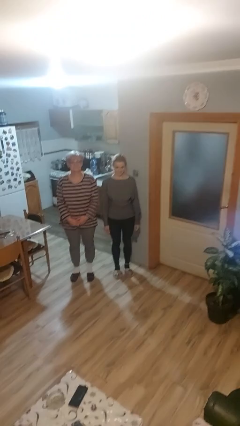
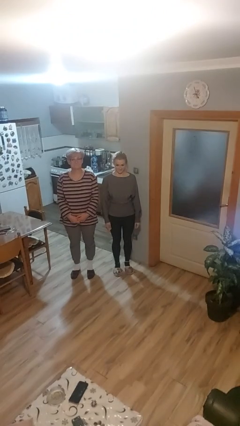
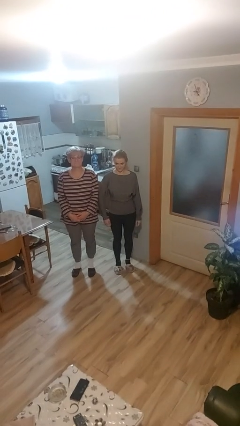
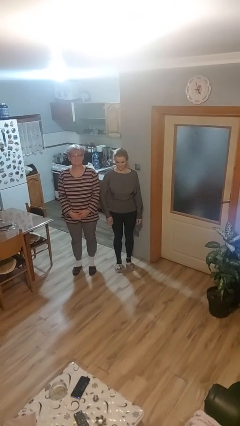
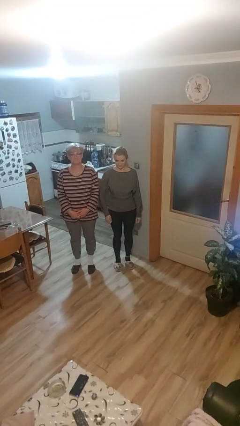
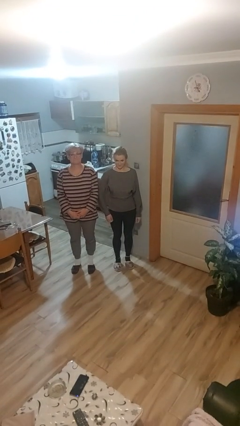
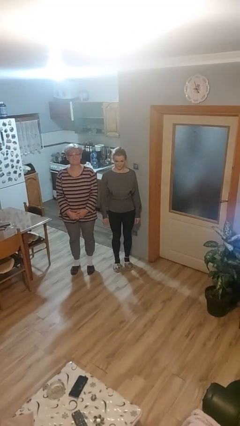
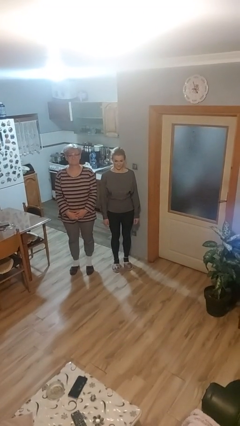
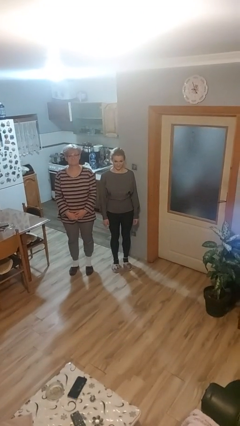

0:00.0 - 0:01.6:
person nudges person with elbow

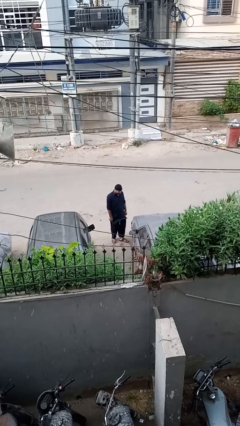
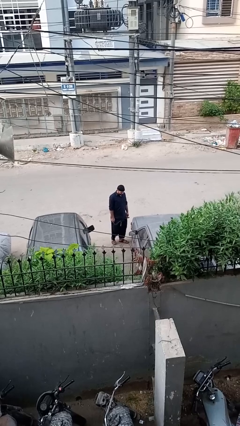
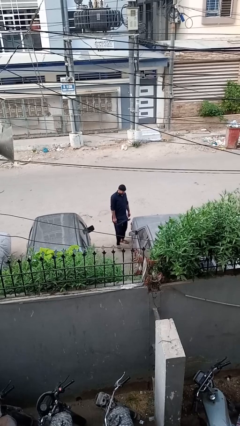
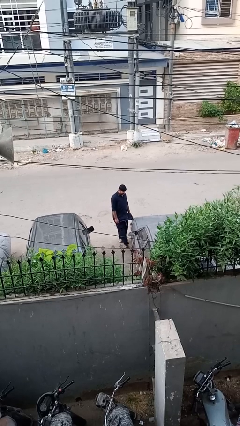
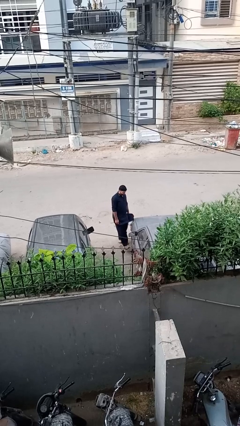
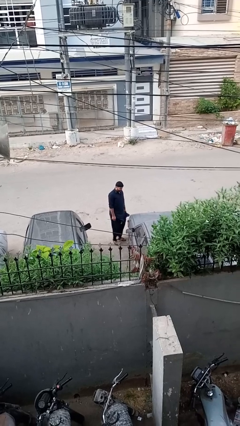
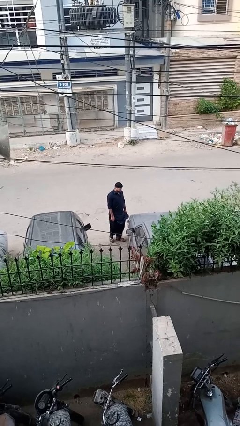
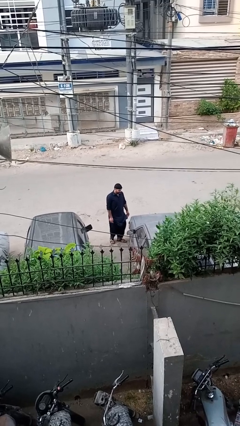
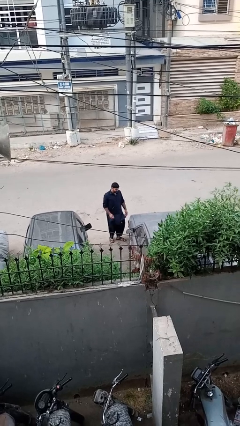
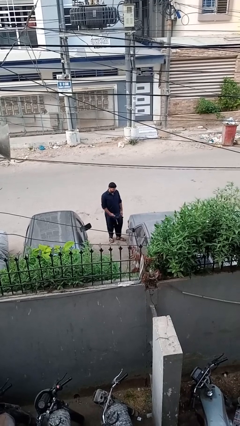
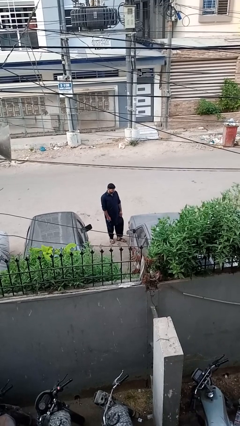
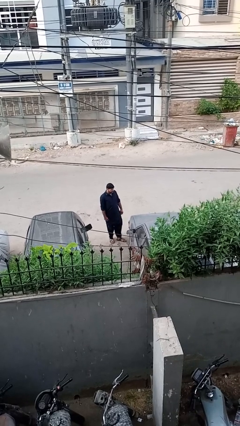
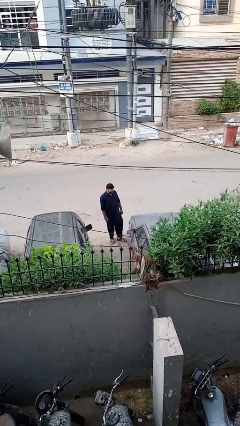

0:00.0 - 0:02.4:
person kicks car tires

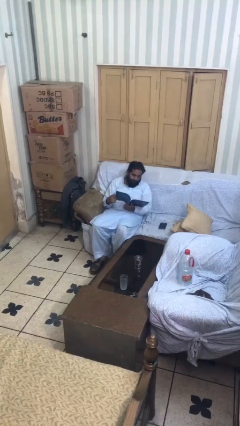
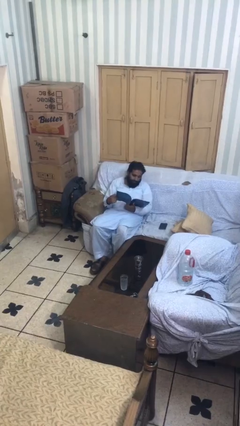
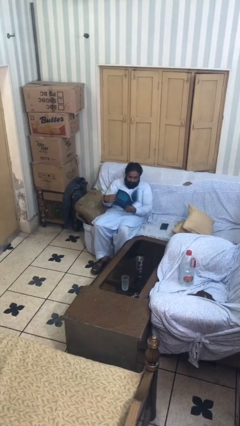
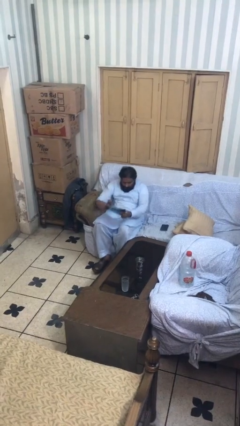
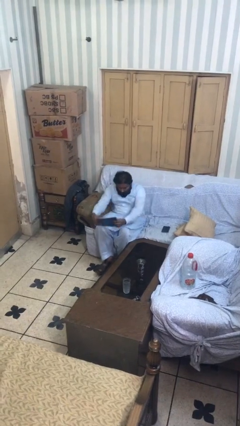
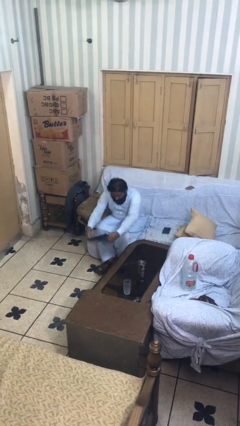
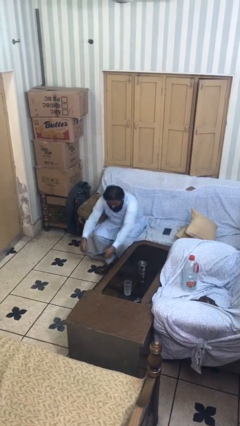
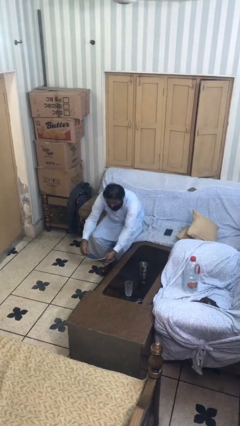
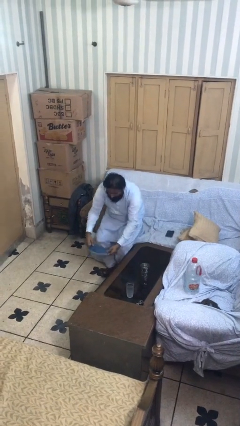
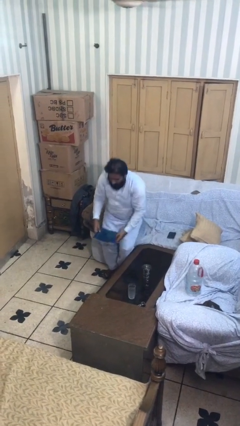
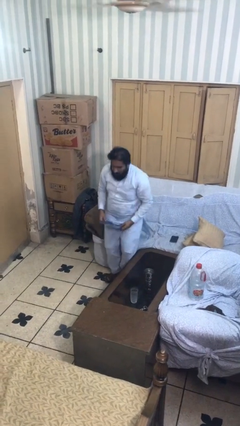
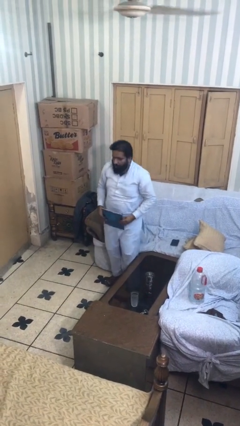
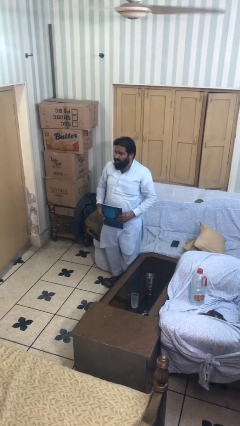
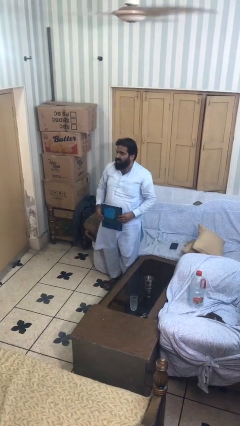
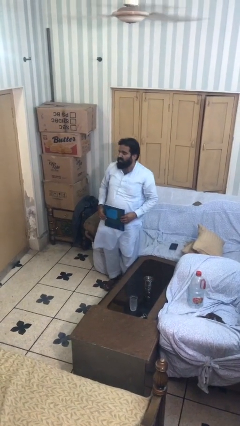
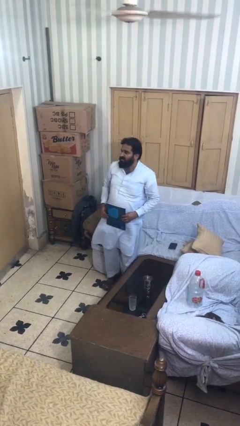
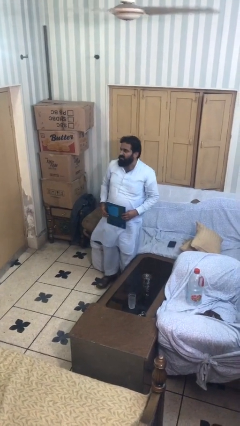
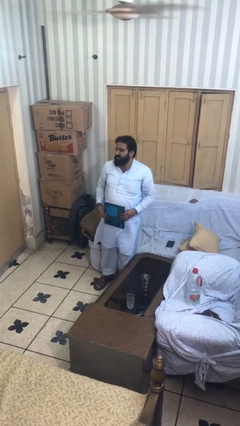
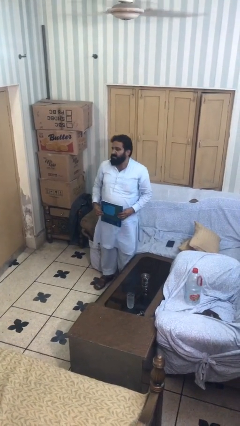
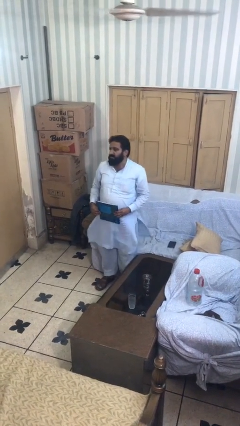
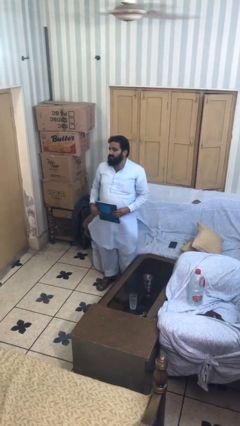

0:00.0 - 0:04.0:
person stands up

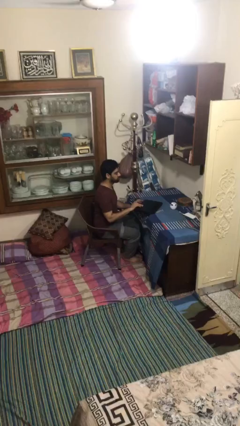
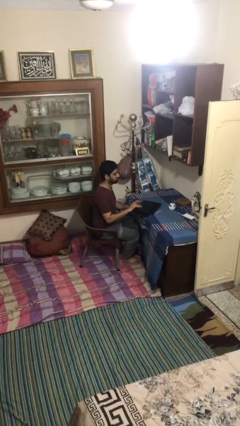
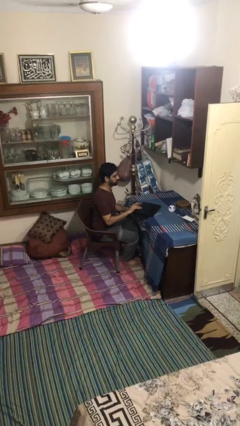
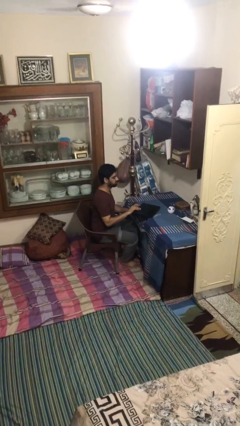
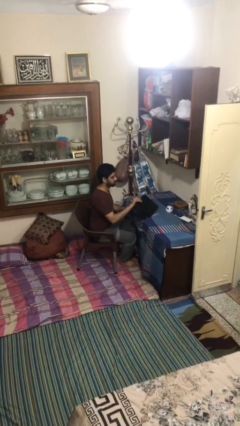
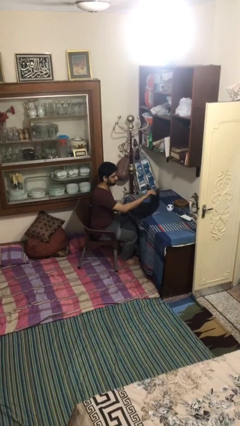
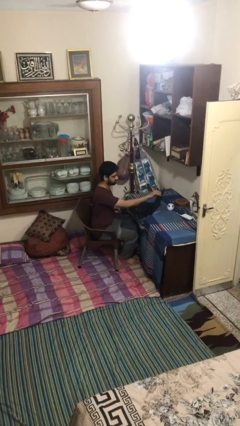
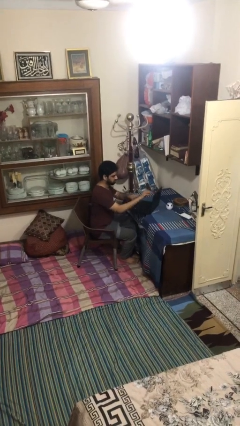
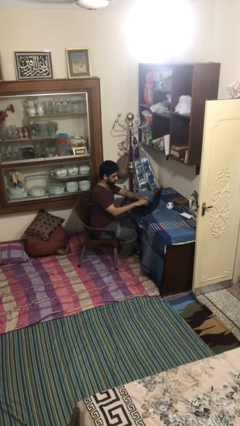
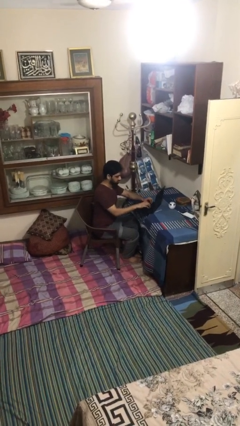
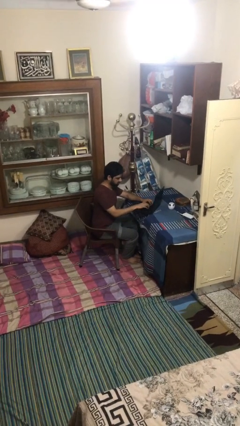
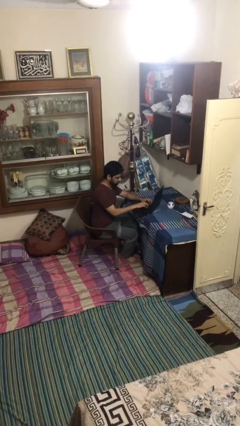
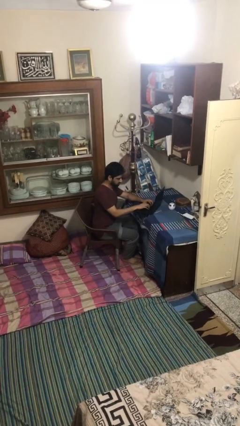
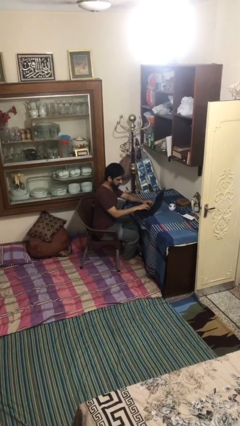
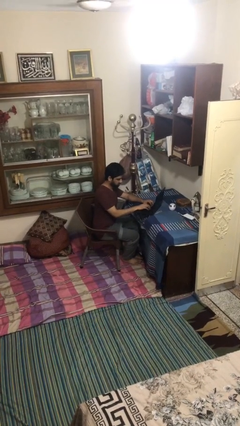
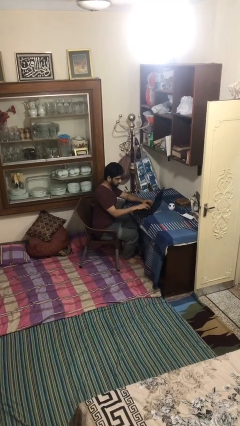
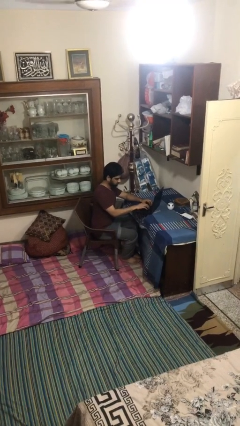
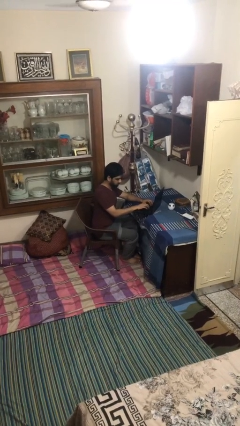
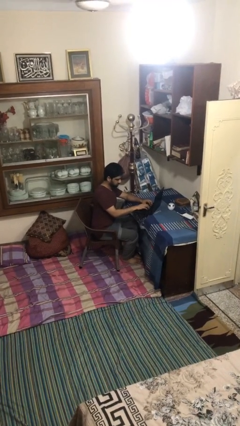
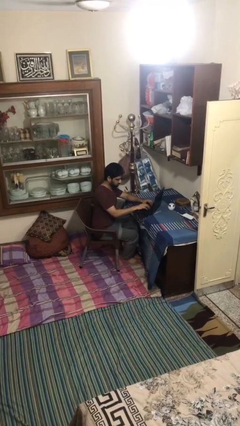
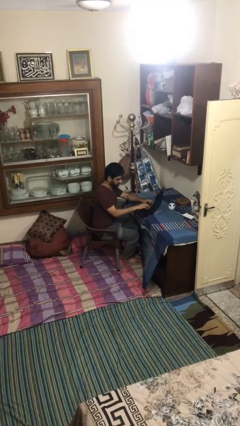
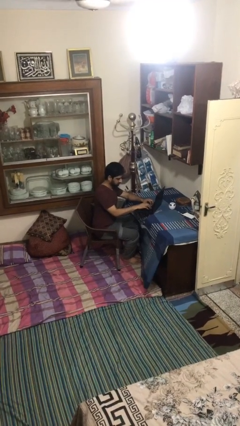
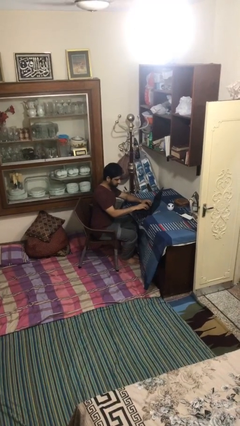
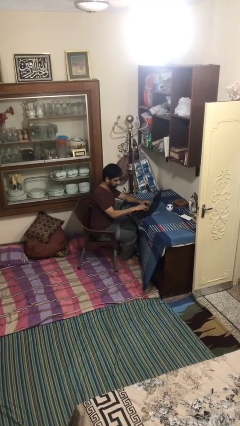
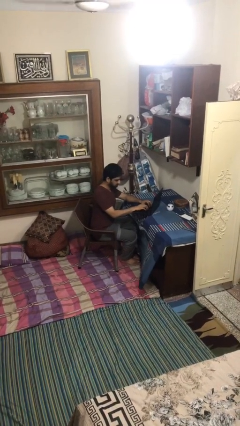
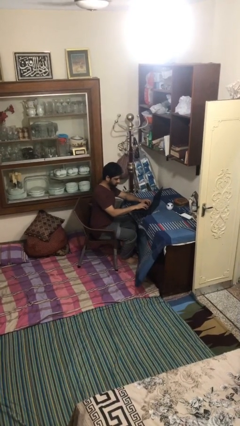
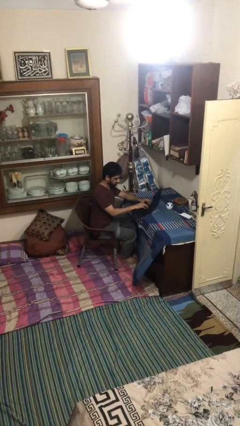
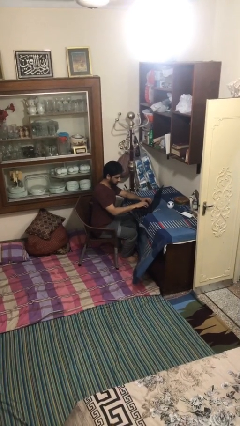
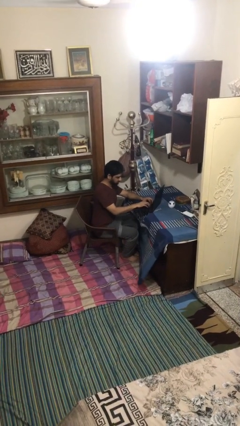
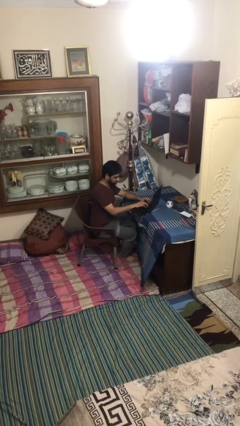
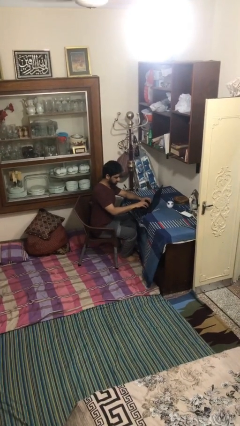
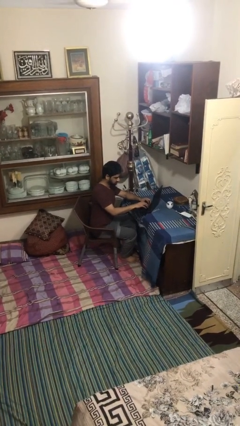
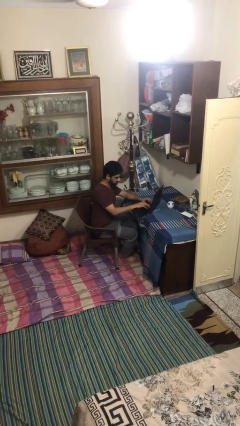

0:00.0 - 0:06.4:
person interacts with laptop

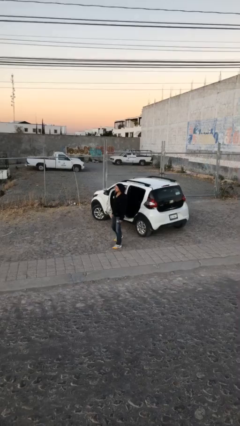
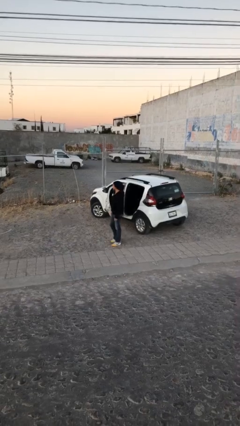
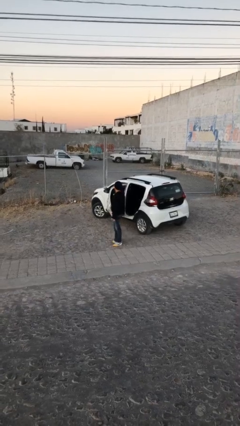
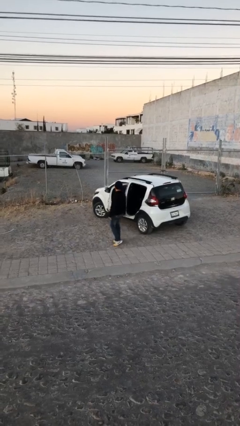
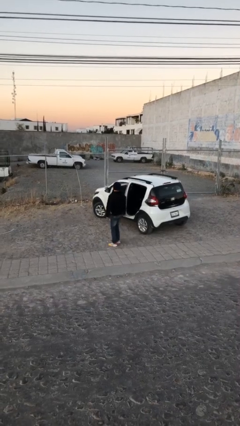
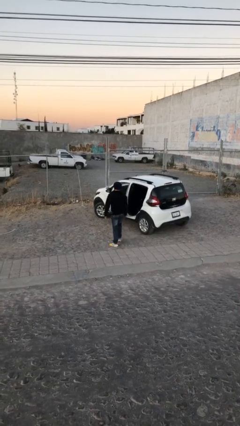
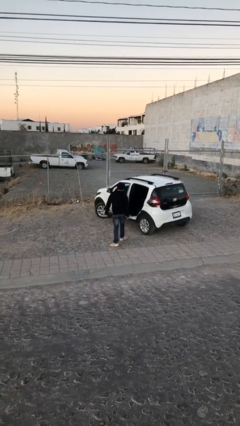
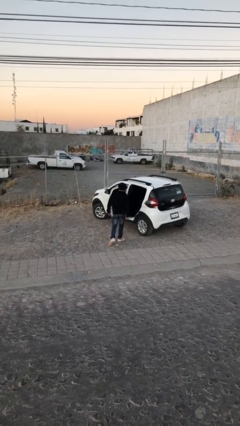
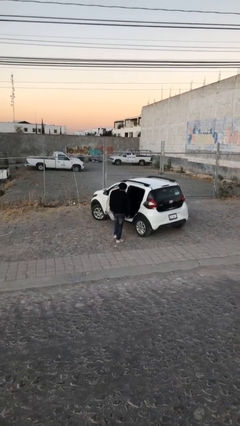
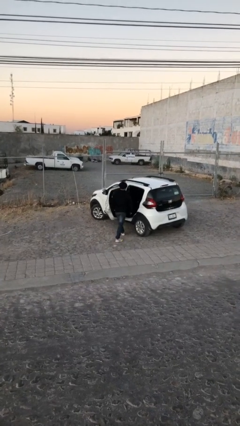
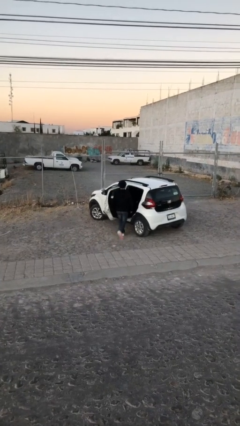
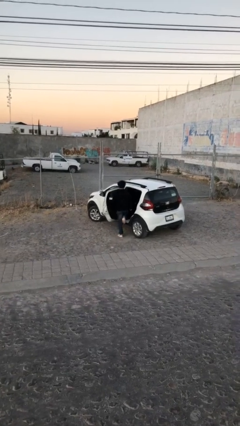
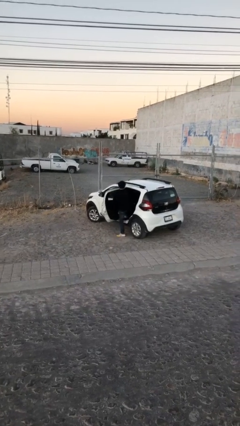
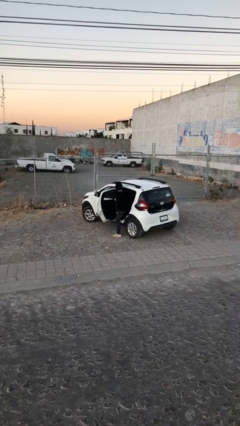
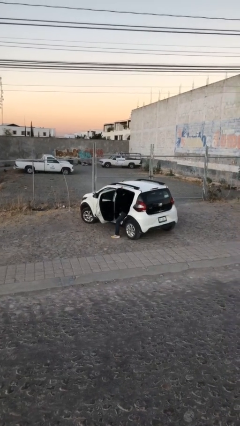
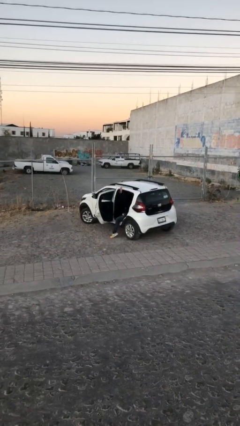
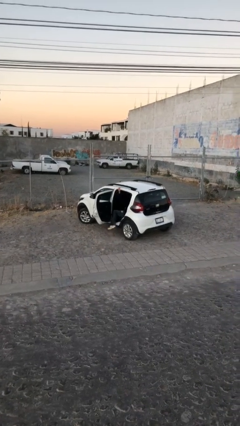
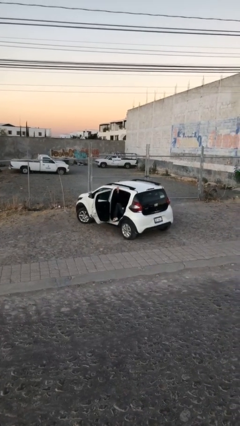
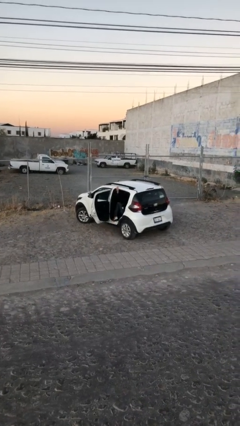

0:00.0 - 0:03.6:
person enters car
